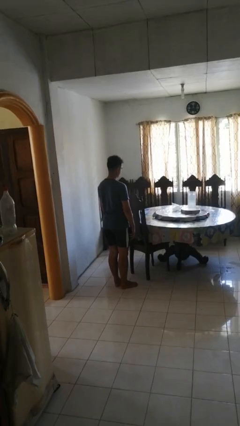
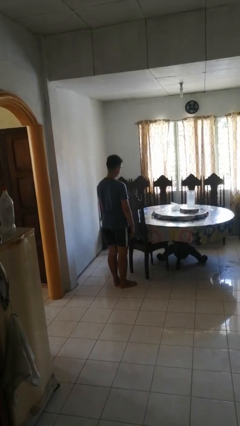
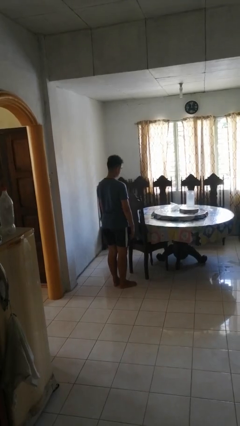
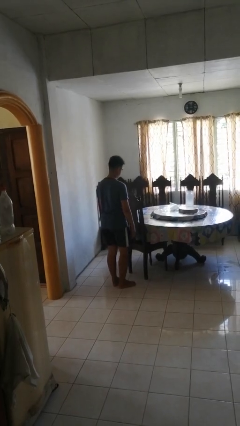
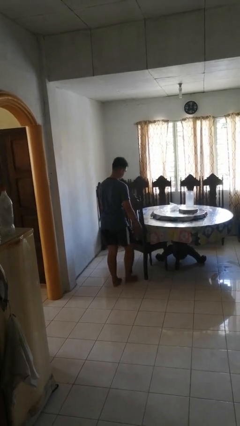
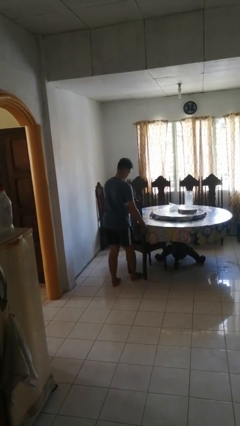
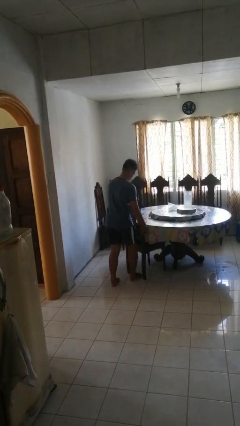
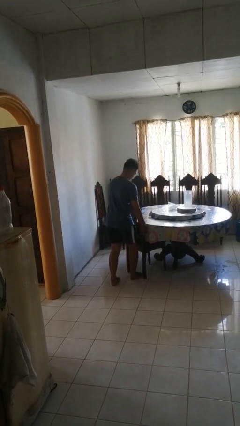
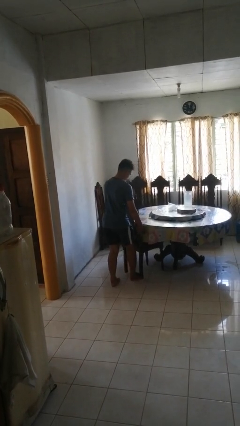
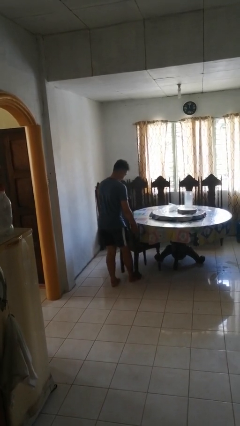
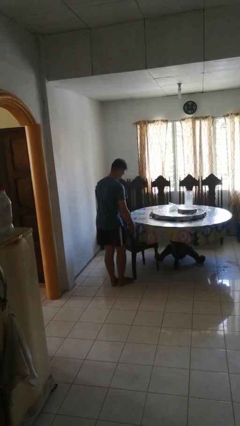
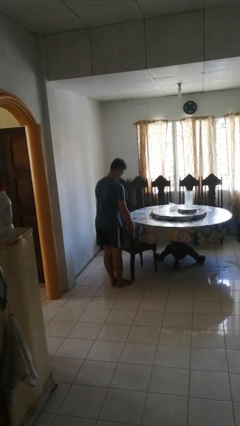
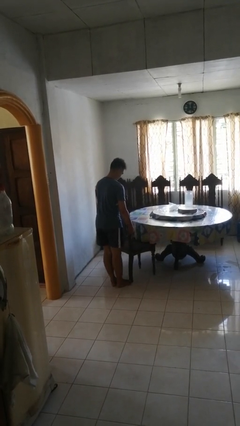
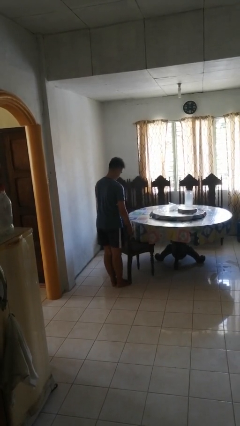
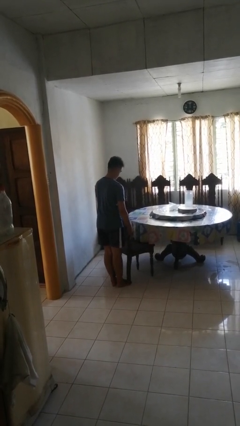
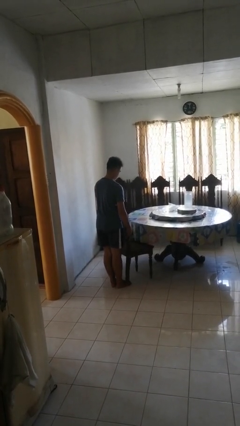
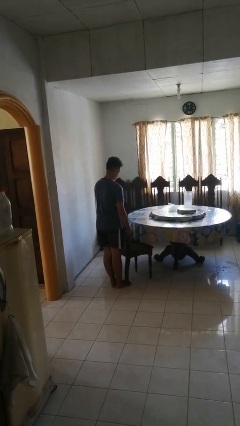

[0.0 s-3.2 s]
person pulls out chair

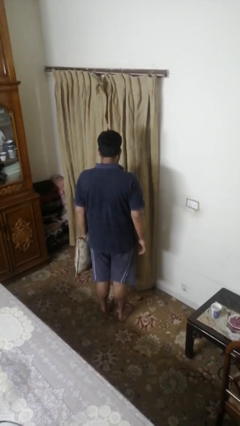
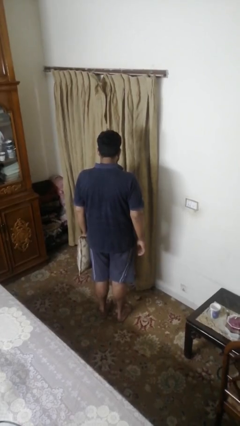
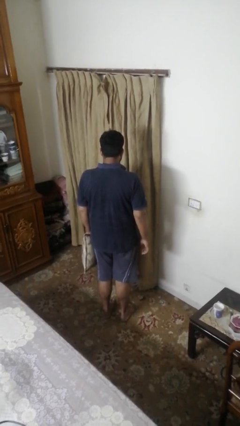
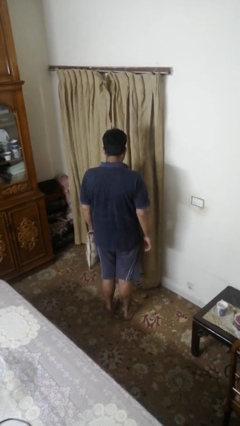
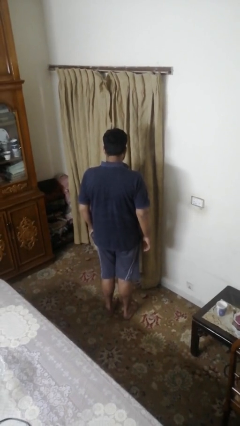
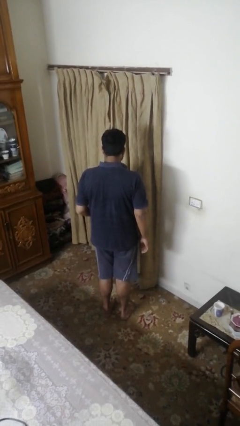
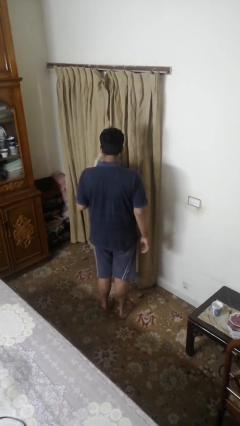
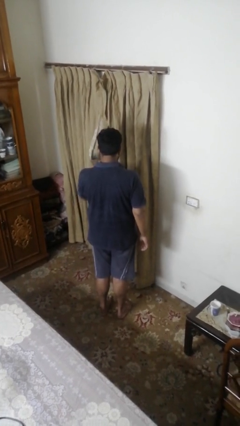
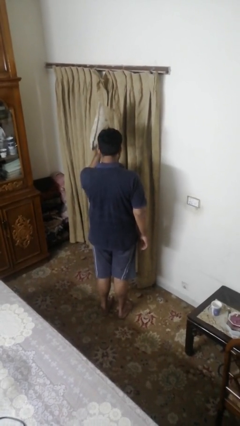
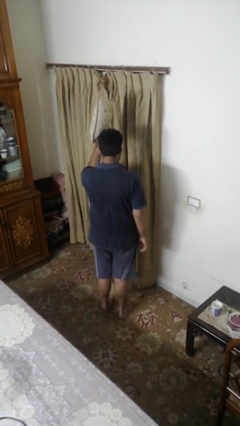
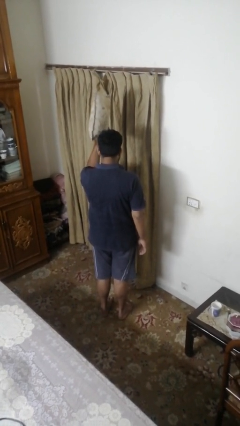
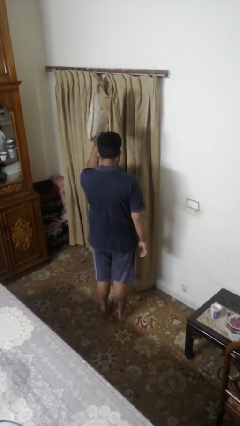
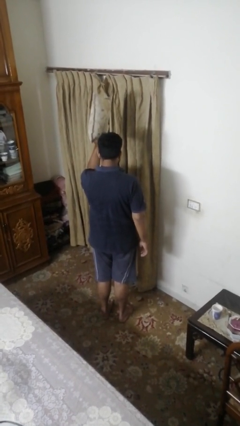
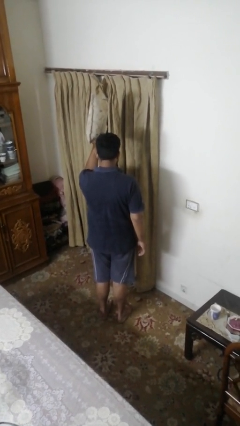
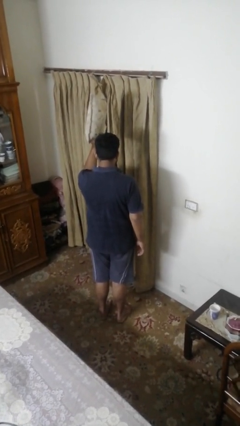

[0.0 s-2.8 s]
person holds object above head

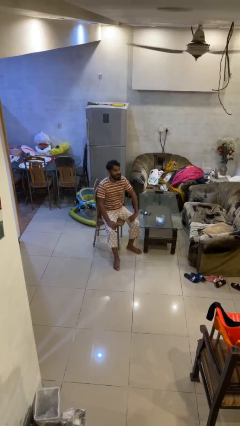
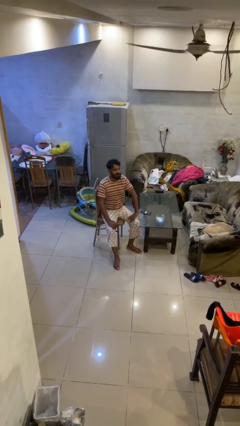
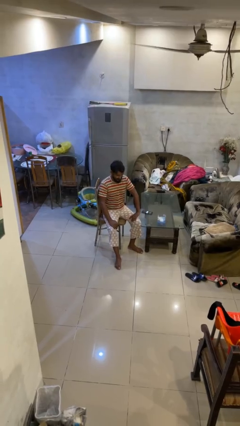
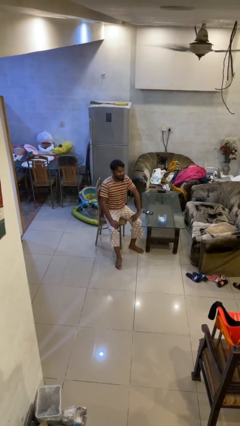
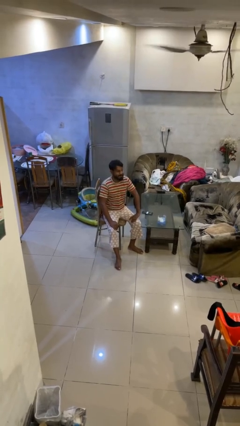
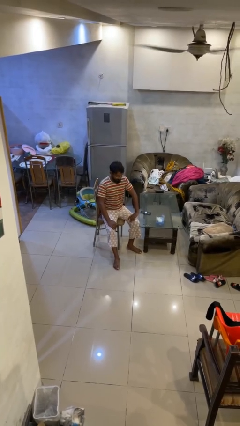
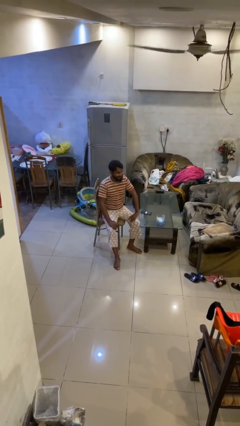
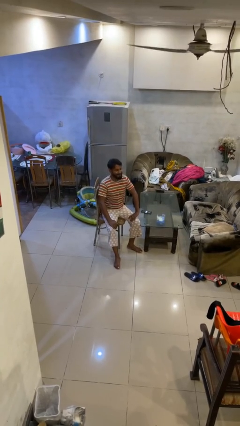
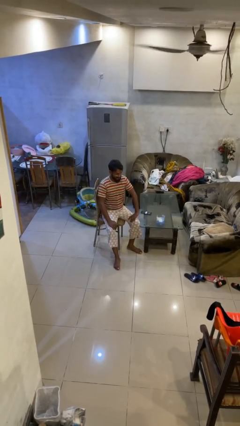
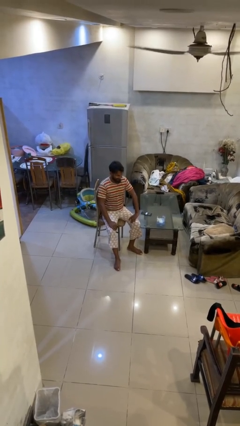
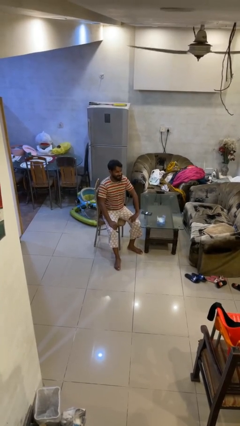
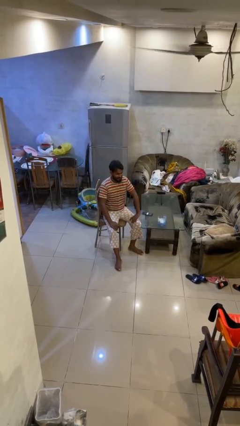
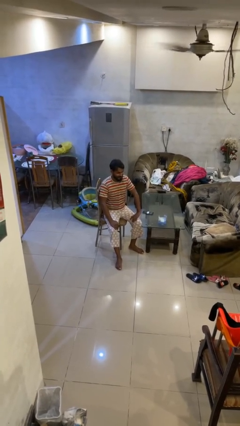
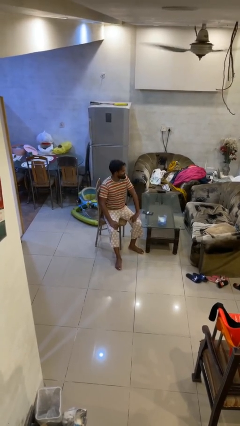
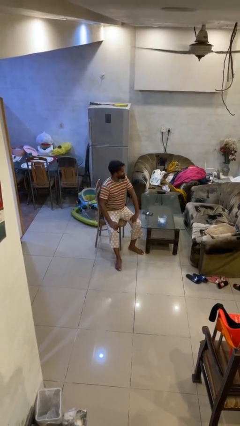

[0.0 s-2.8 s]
person nods head

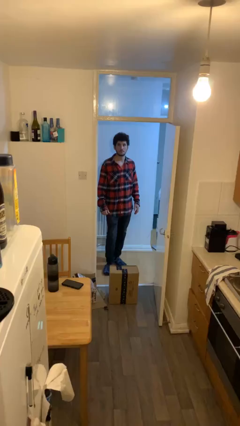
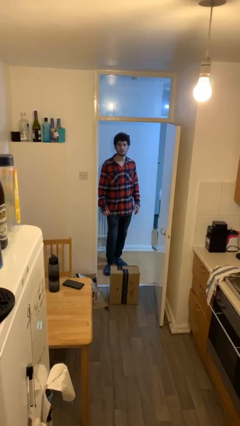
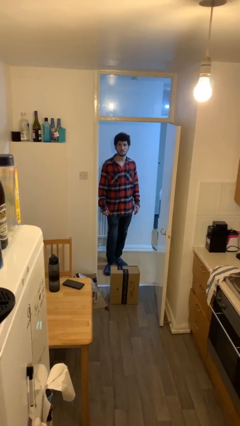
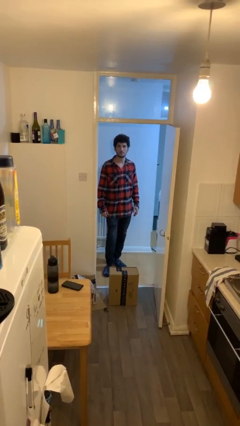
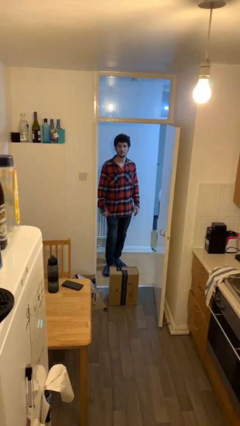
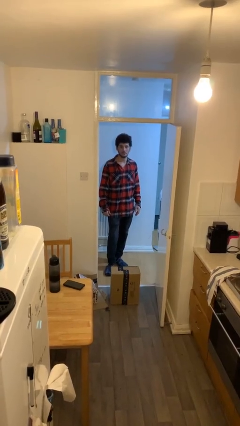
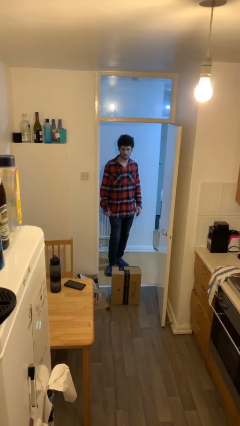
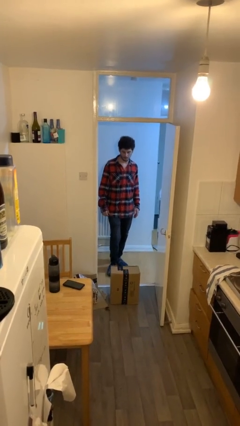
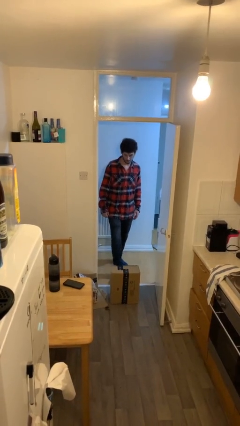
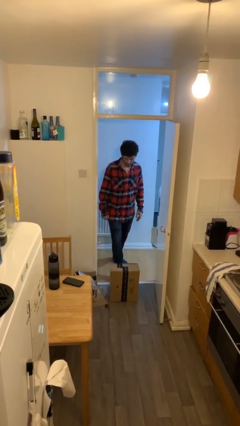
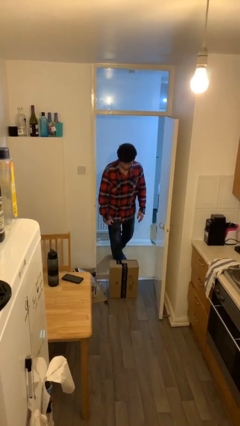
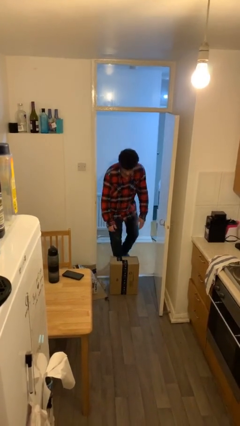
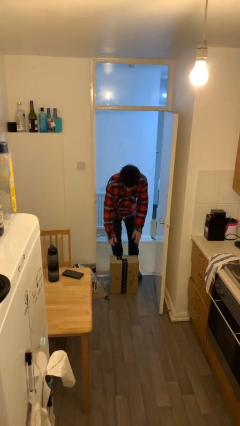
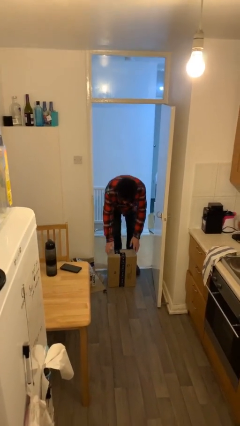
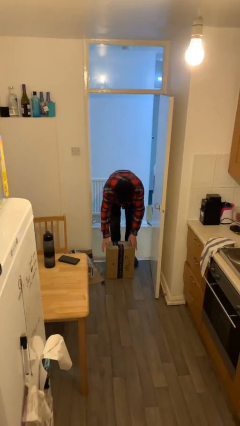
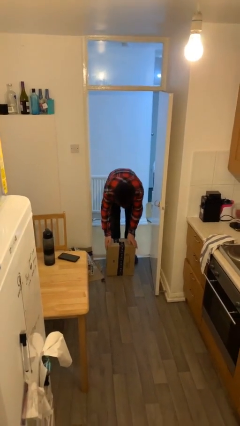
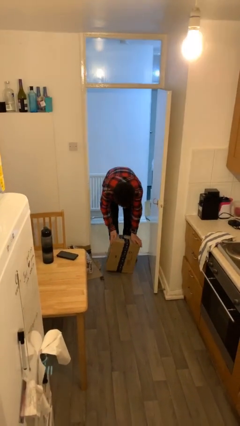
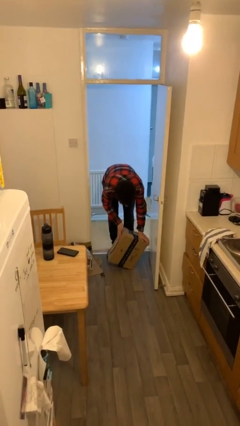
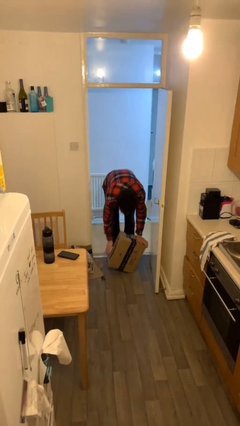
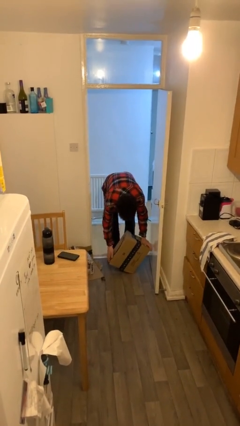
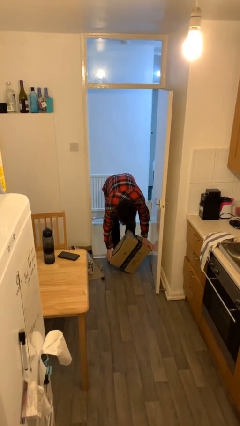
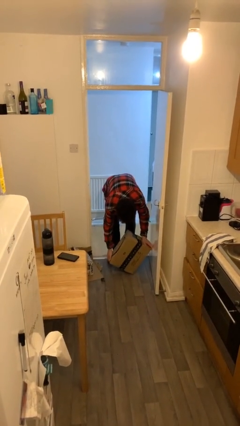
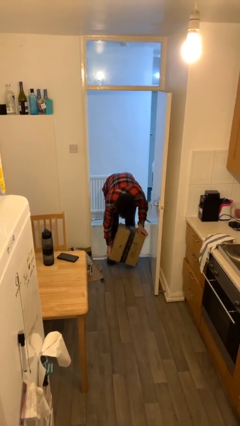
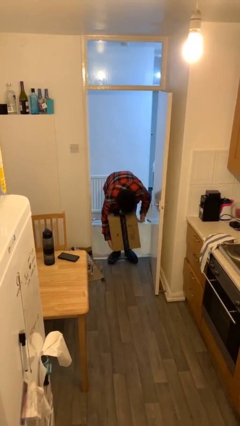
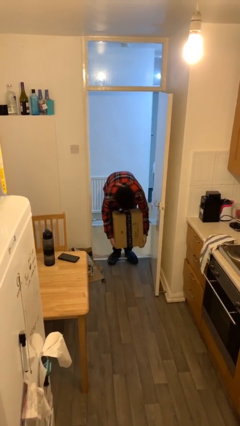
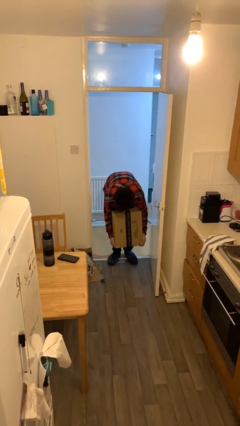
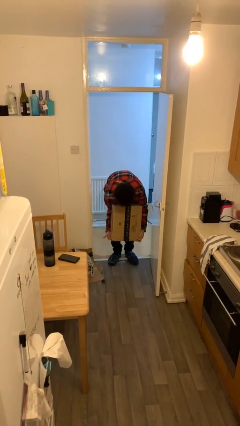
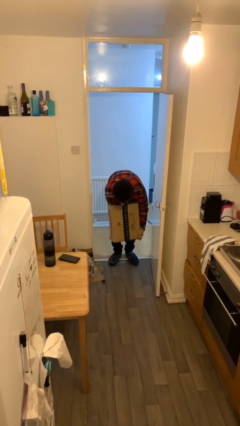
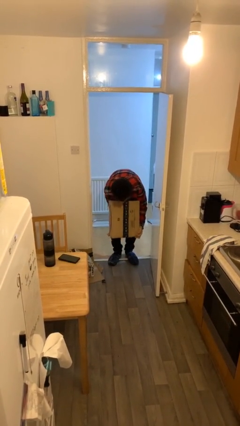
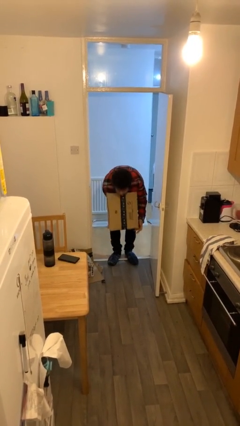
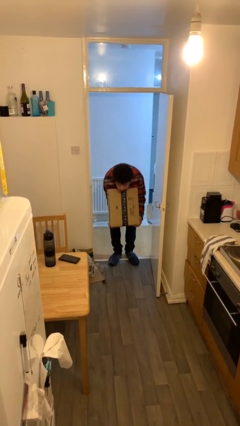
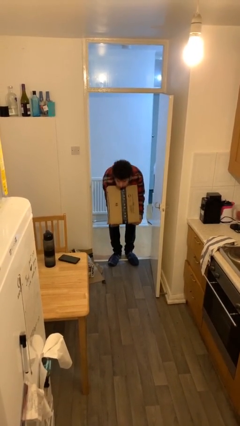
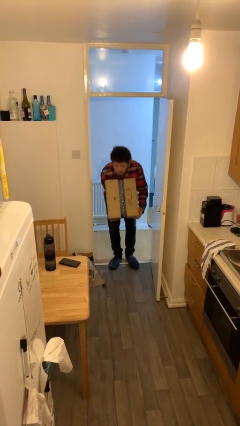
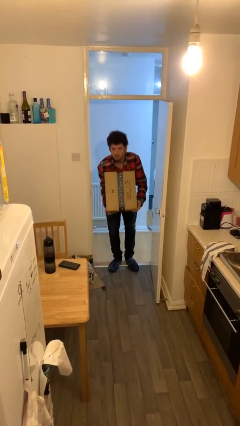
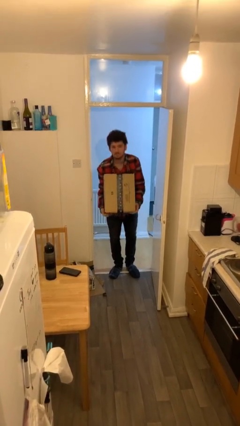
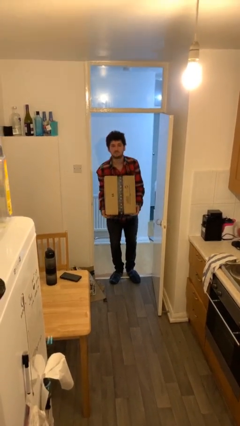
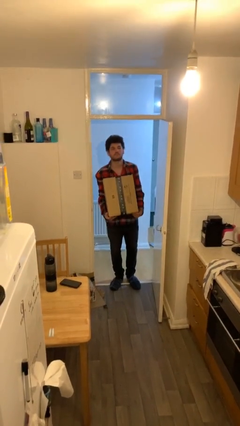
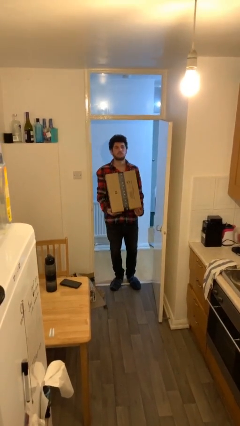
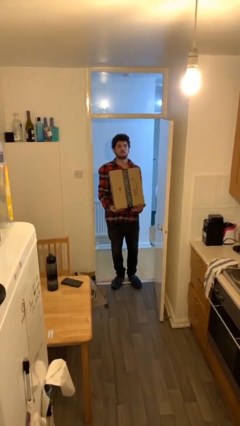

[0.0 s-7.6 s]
person picks up object from floor

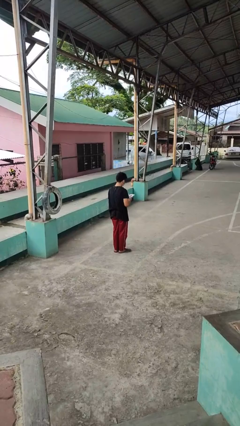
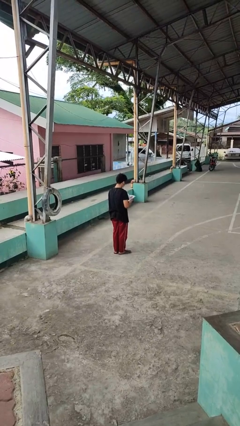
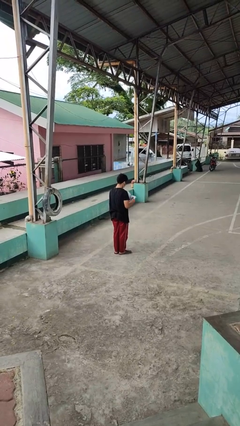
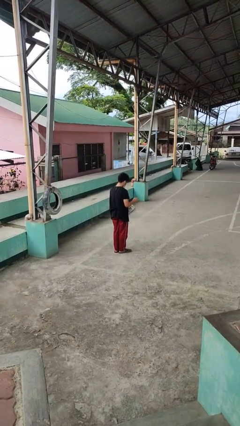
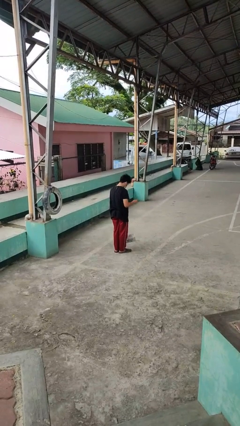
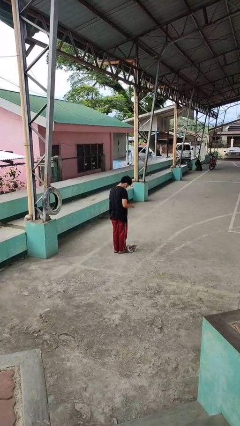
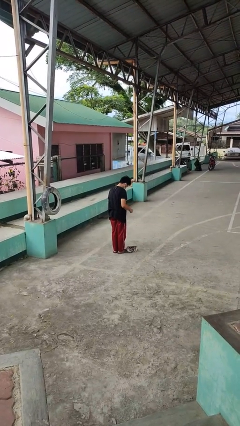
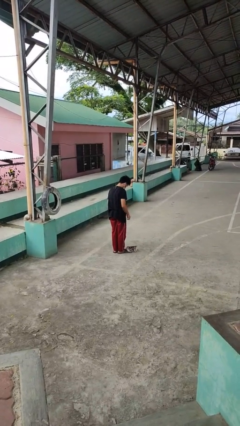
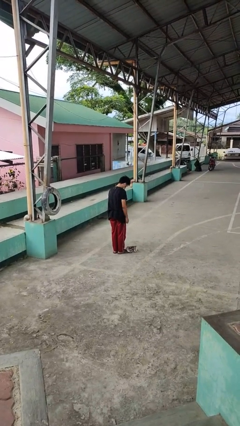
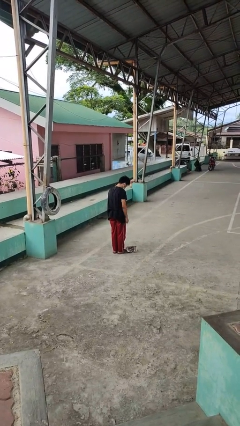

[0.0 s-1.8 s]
person drops object

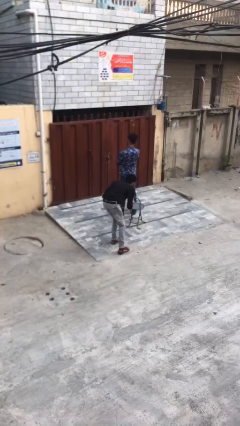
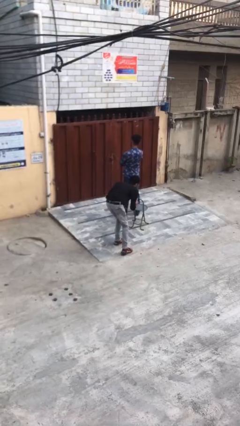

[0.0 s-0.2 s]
person steals object from person
